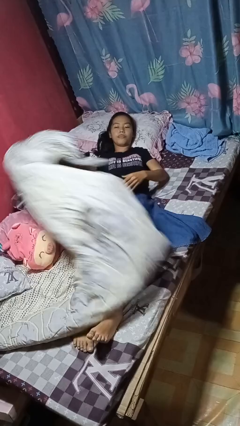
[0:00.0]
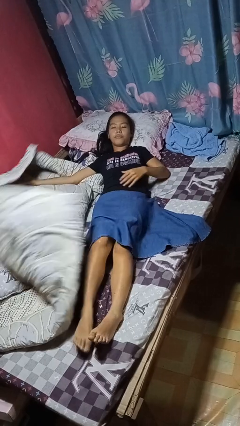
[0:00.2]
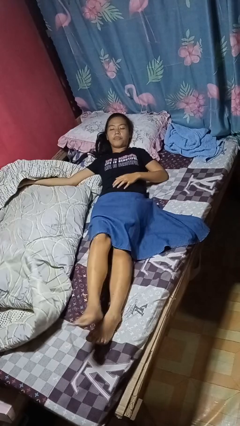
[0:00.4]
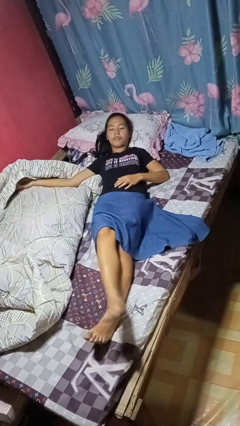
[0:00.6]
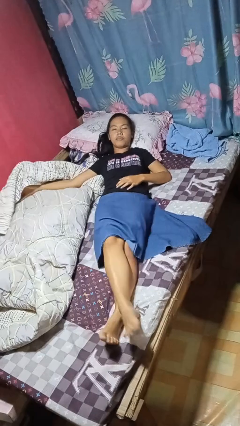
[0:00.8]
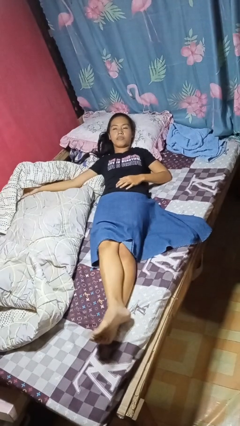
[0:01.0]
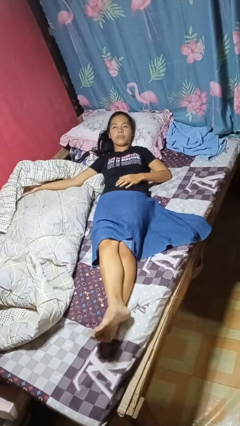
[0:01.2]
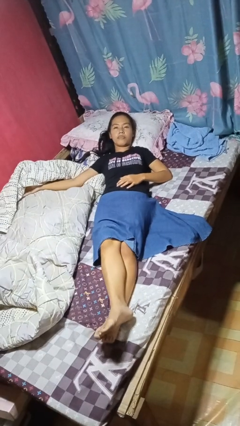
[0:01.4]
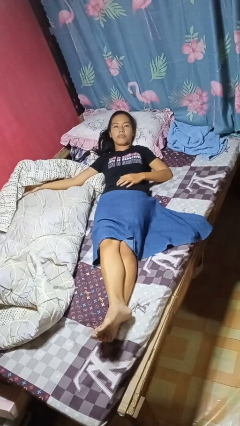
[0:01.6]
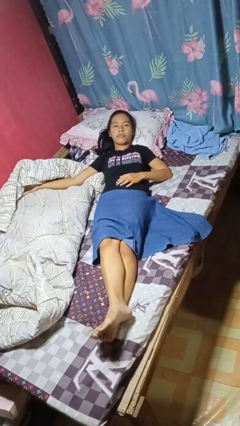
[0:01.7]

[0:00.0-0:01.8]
person uncovers with bedsheets

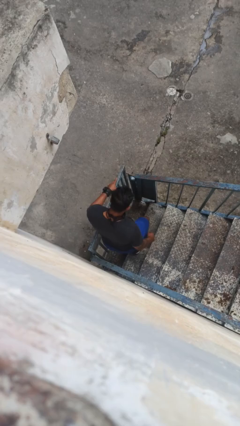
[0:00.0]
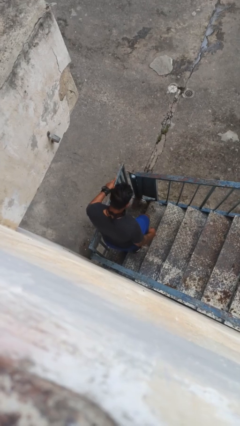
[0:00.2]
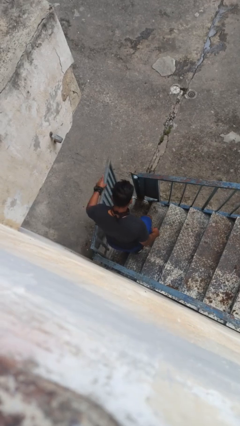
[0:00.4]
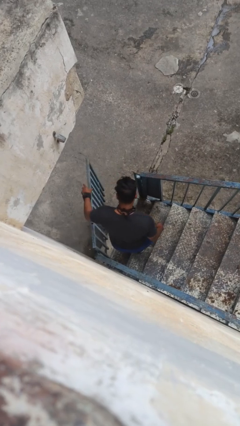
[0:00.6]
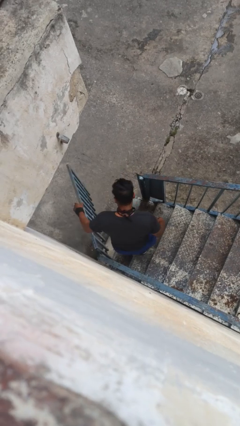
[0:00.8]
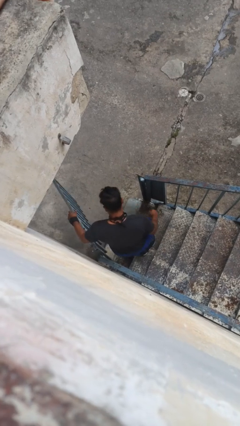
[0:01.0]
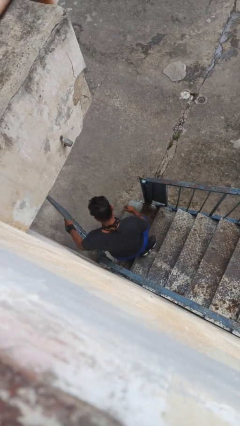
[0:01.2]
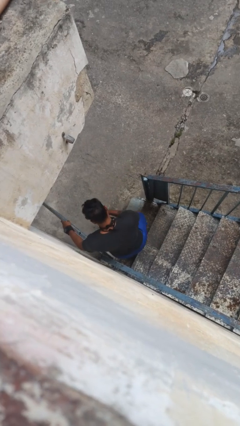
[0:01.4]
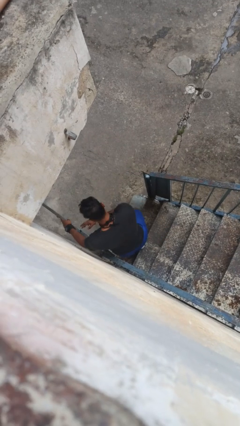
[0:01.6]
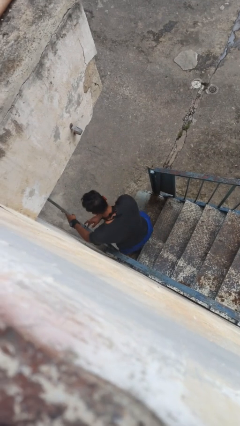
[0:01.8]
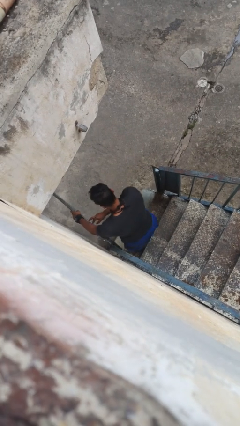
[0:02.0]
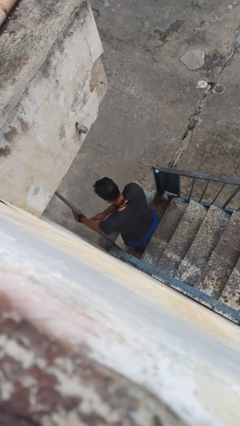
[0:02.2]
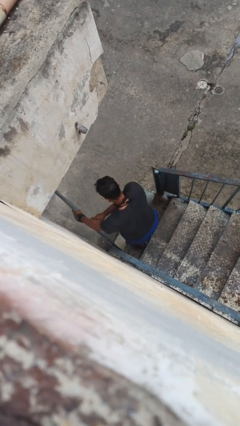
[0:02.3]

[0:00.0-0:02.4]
person opens facility door

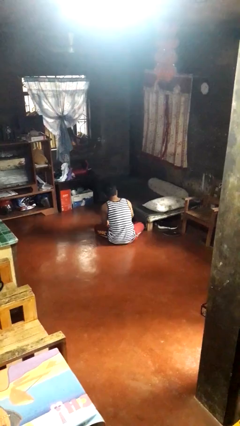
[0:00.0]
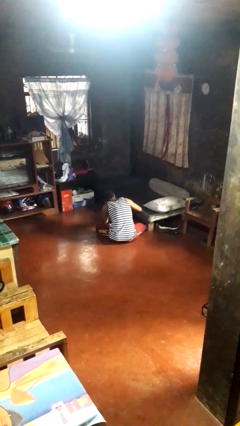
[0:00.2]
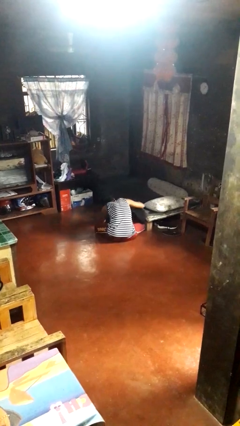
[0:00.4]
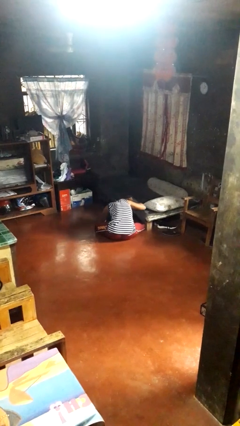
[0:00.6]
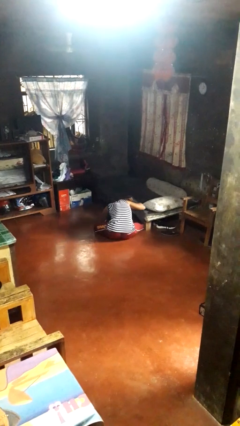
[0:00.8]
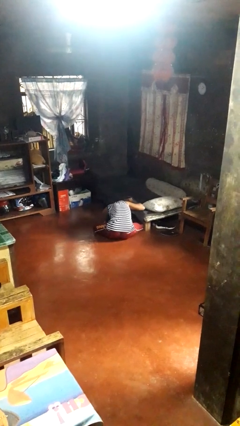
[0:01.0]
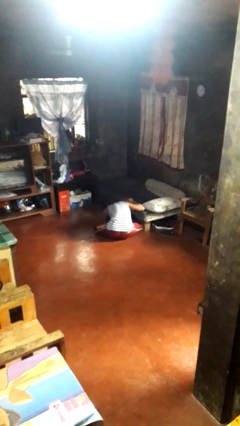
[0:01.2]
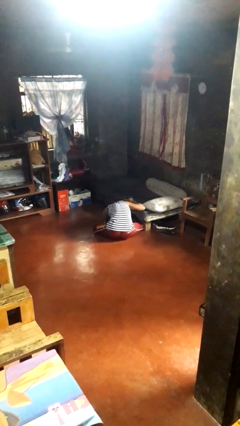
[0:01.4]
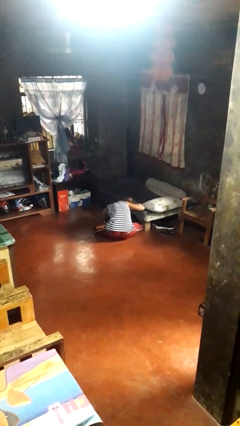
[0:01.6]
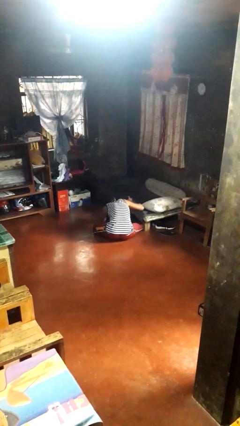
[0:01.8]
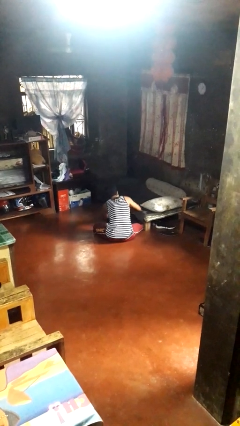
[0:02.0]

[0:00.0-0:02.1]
person searches under bed

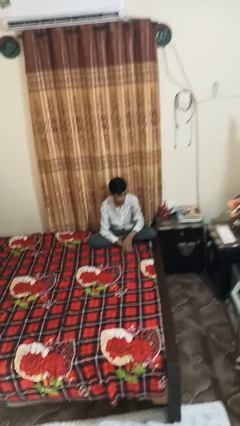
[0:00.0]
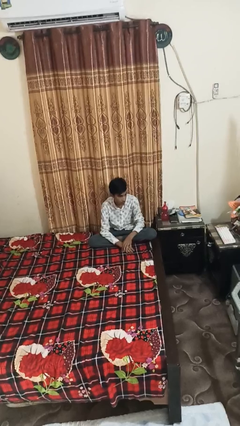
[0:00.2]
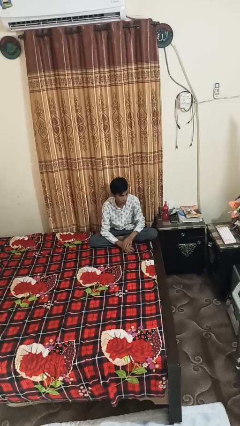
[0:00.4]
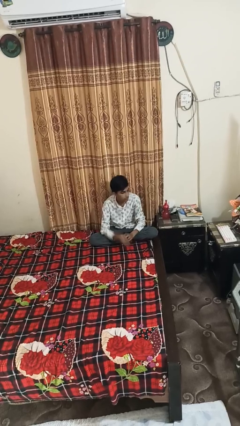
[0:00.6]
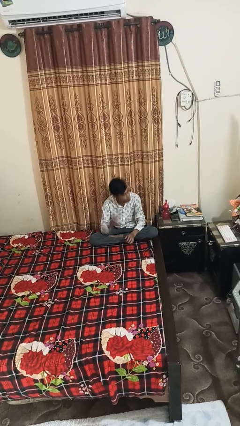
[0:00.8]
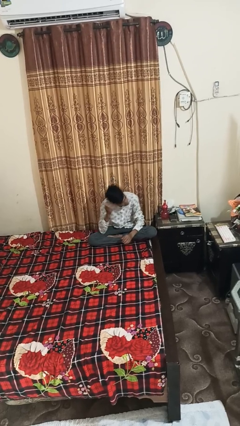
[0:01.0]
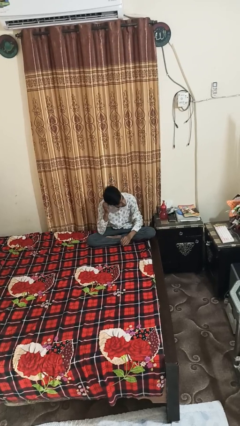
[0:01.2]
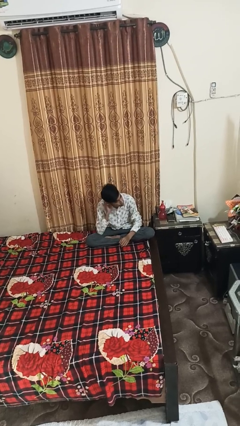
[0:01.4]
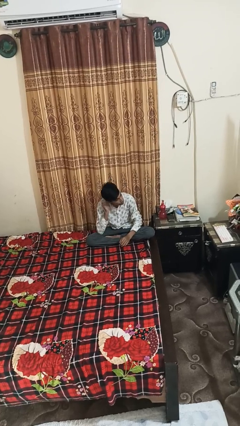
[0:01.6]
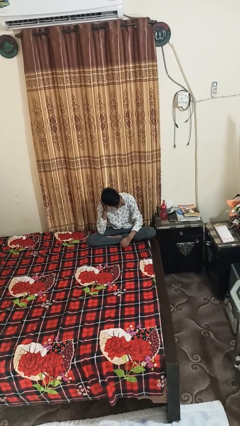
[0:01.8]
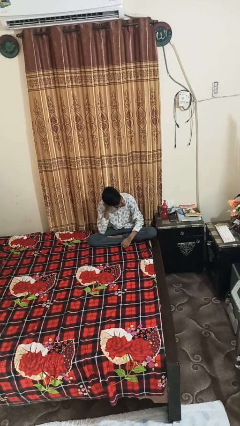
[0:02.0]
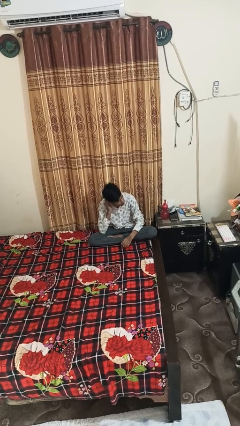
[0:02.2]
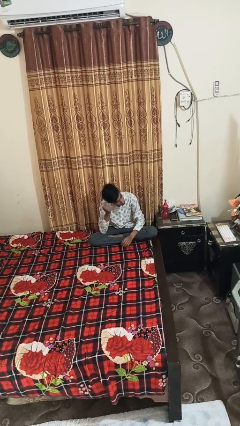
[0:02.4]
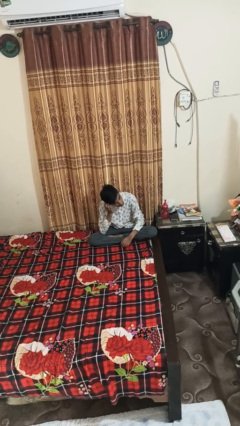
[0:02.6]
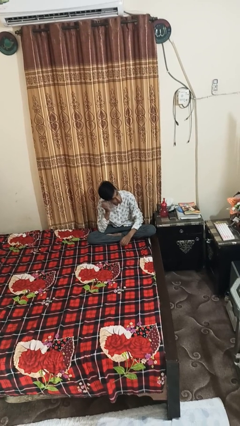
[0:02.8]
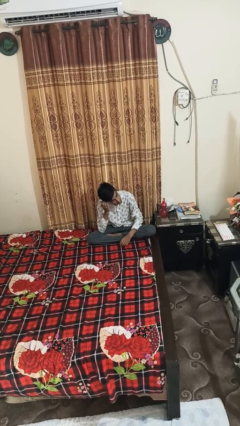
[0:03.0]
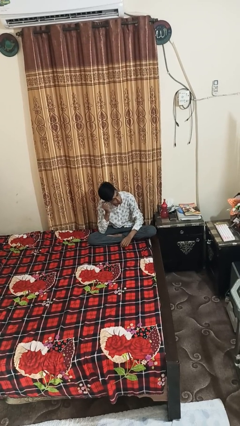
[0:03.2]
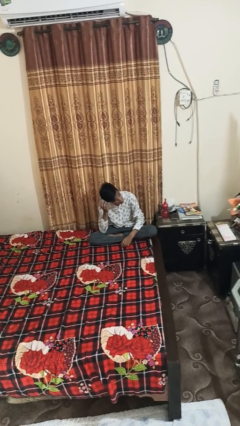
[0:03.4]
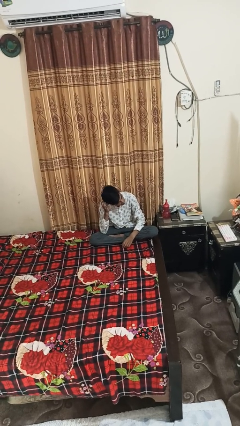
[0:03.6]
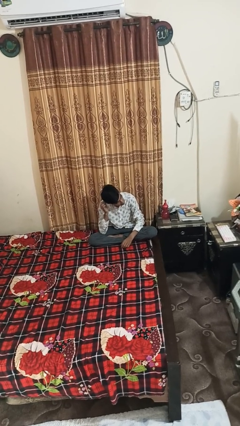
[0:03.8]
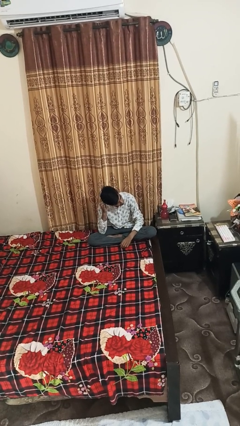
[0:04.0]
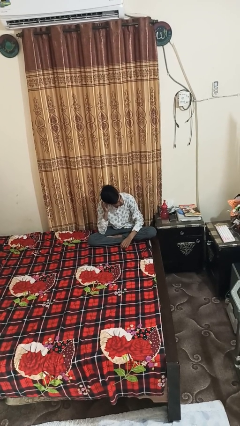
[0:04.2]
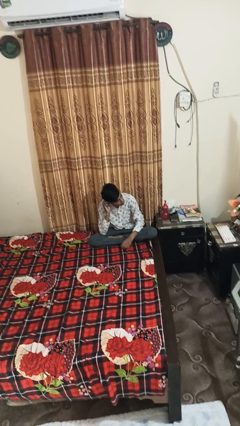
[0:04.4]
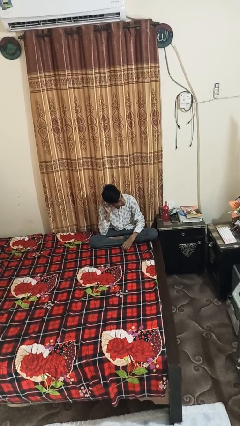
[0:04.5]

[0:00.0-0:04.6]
person strokes hair

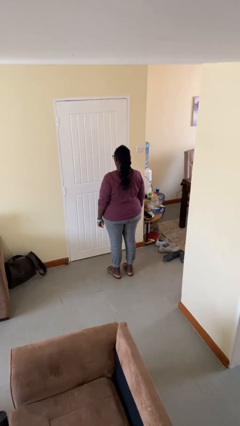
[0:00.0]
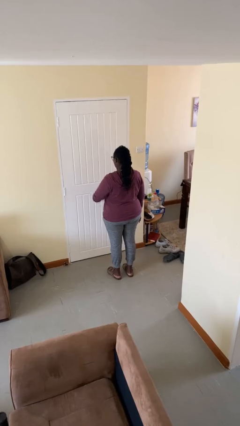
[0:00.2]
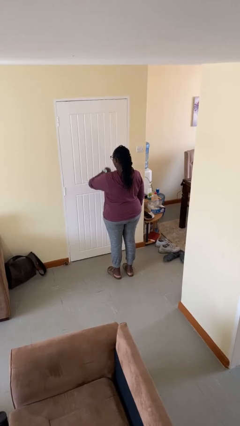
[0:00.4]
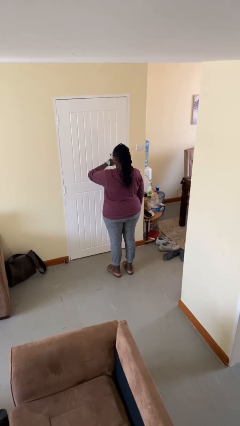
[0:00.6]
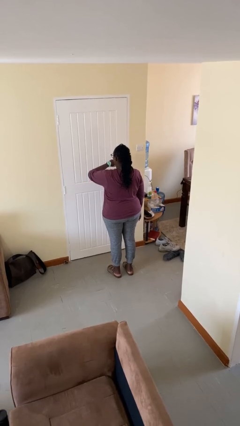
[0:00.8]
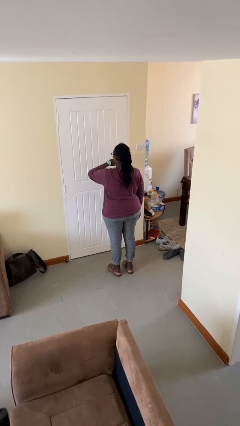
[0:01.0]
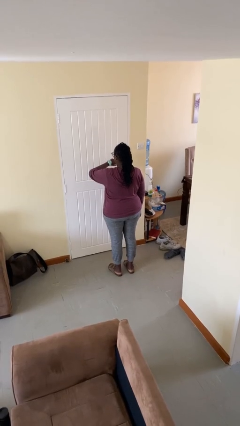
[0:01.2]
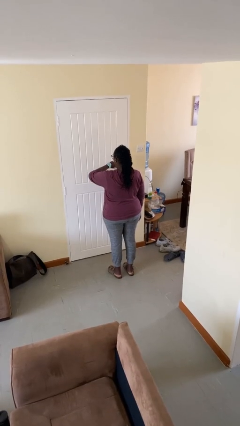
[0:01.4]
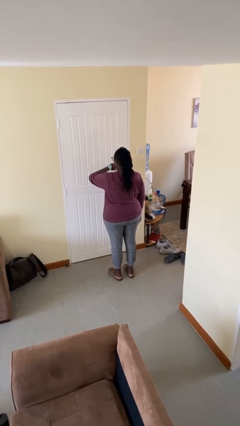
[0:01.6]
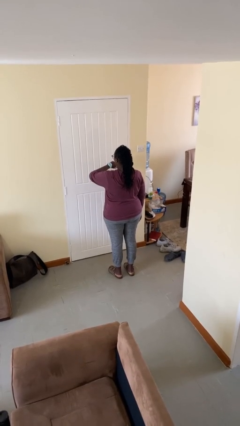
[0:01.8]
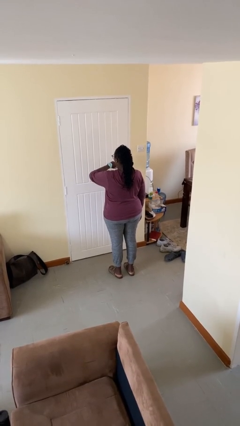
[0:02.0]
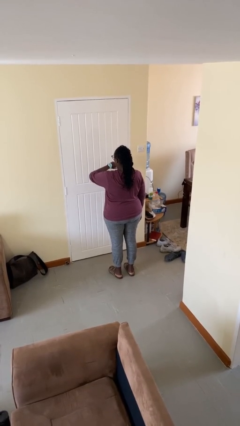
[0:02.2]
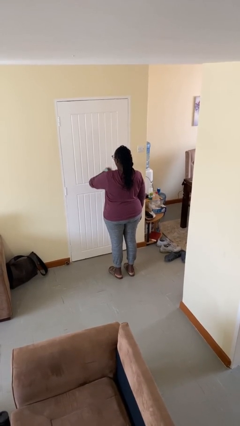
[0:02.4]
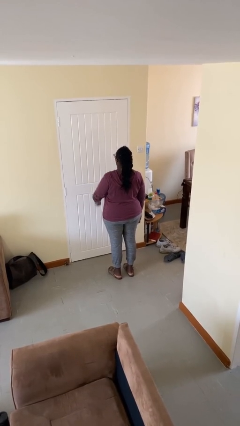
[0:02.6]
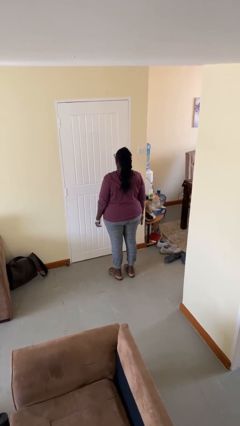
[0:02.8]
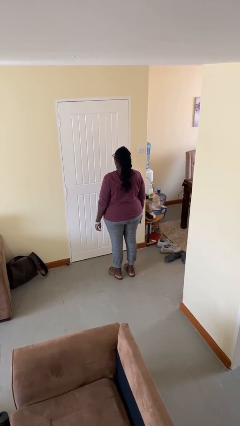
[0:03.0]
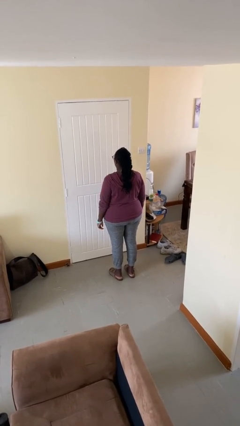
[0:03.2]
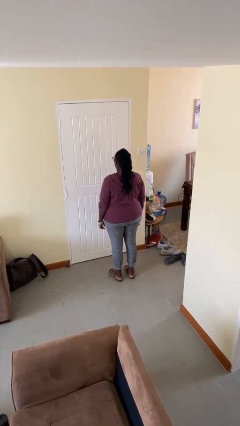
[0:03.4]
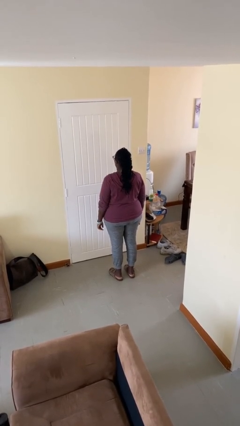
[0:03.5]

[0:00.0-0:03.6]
person looks at wristwatch

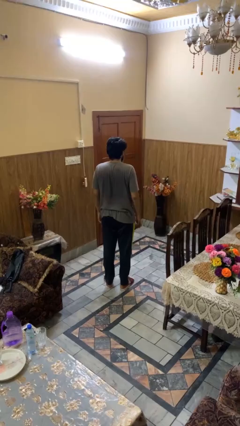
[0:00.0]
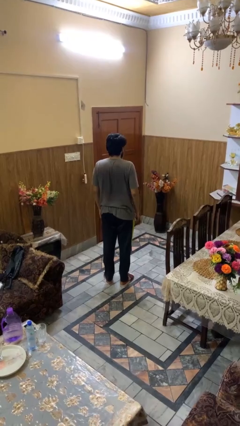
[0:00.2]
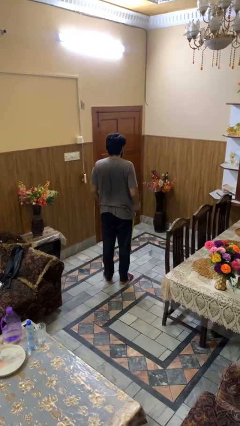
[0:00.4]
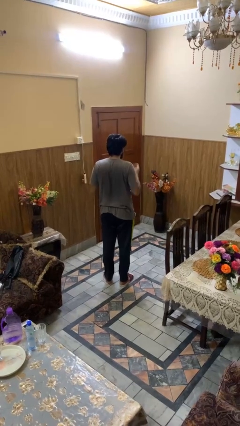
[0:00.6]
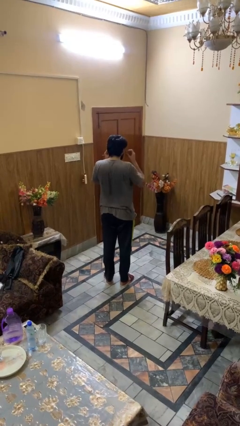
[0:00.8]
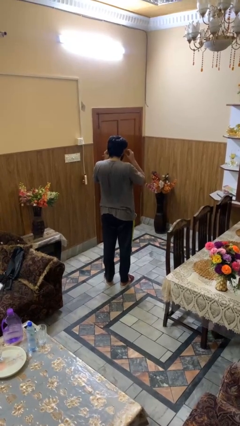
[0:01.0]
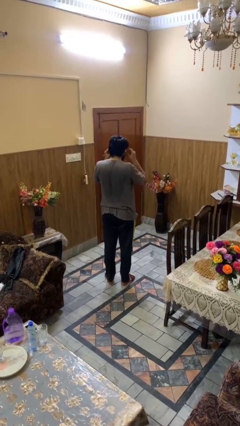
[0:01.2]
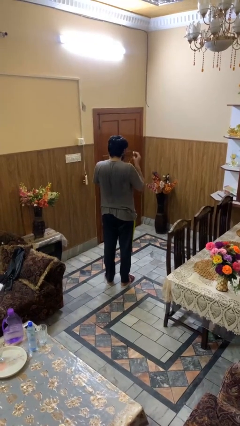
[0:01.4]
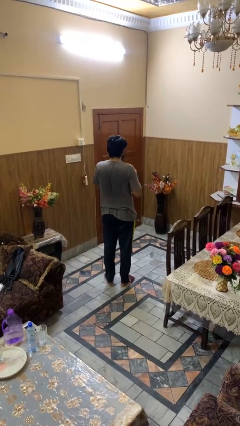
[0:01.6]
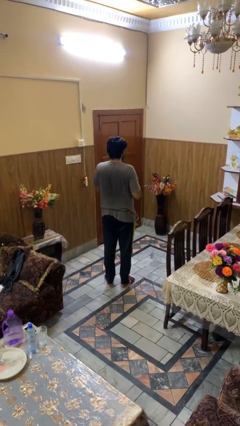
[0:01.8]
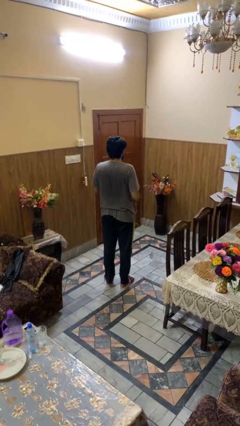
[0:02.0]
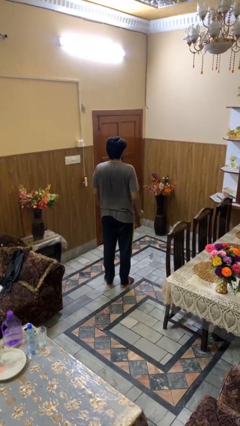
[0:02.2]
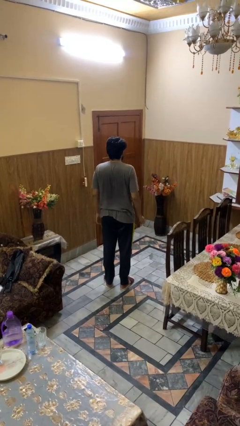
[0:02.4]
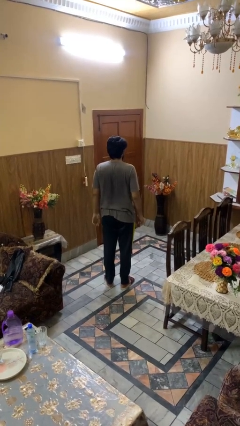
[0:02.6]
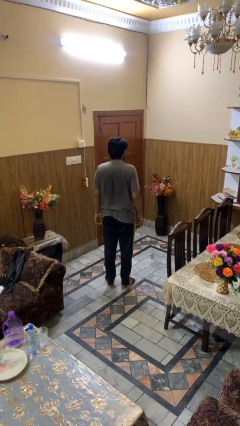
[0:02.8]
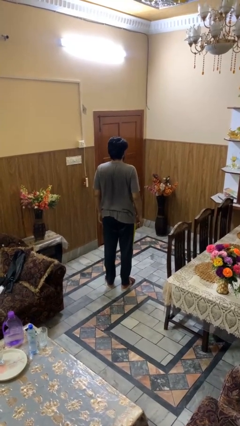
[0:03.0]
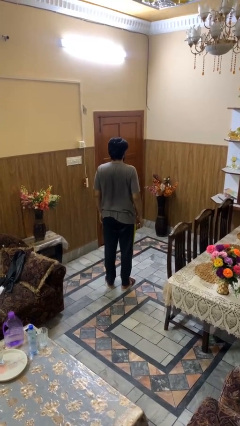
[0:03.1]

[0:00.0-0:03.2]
person takes off headphones
